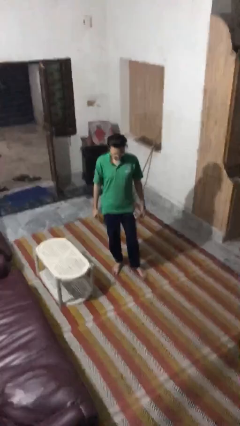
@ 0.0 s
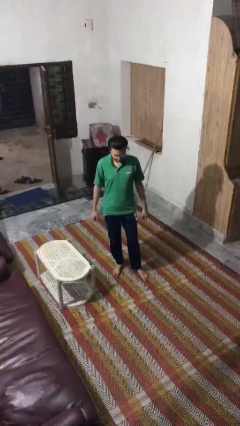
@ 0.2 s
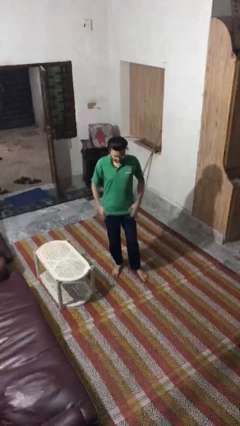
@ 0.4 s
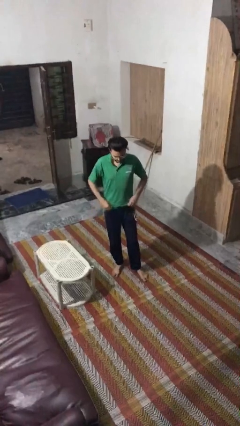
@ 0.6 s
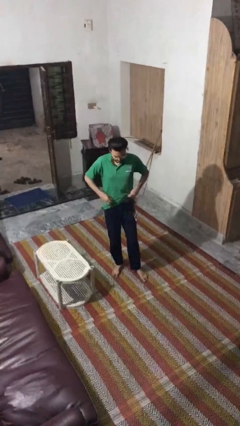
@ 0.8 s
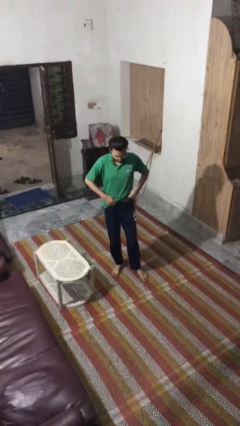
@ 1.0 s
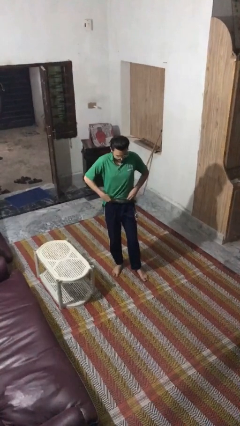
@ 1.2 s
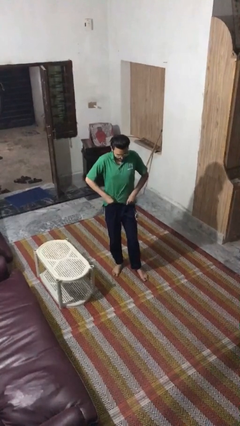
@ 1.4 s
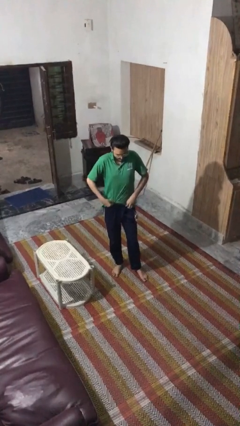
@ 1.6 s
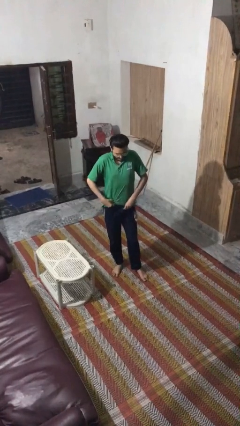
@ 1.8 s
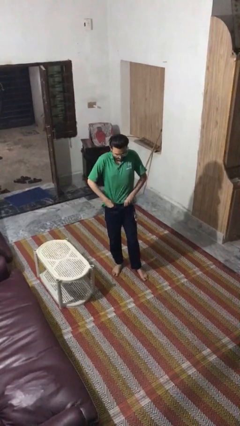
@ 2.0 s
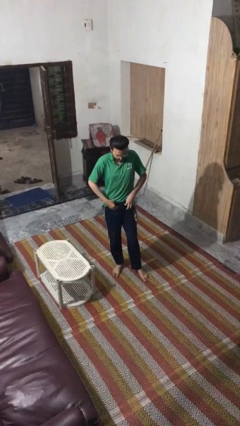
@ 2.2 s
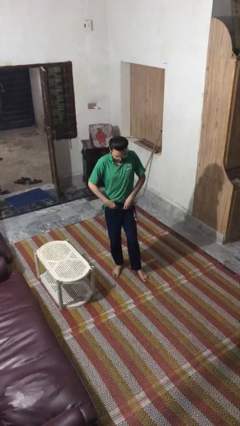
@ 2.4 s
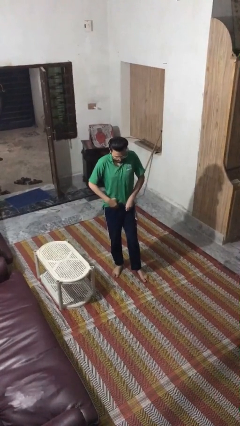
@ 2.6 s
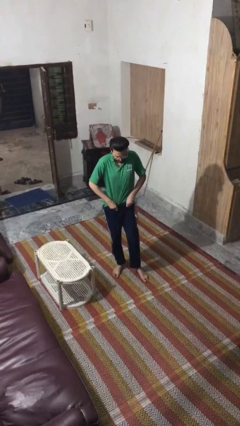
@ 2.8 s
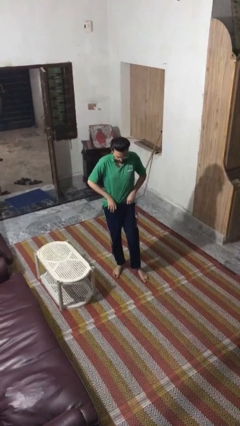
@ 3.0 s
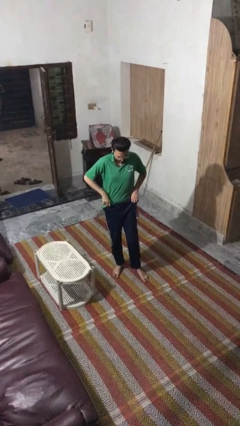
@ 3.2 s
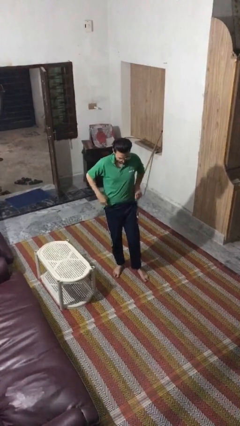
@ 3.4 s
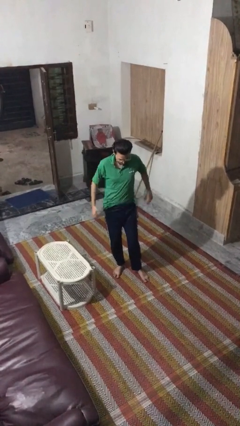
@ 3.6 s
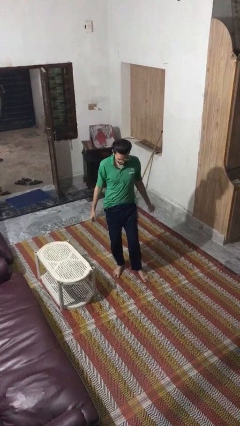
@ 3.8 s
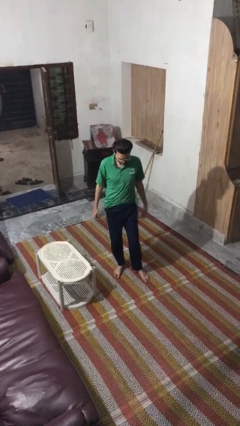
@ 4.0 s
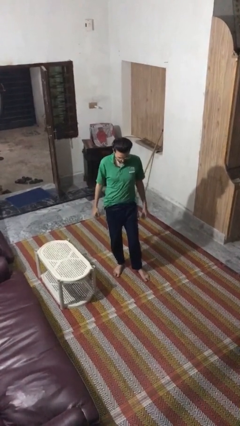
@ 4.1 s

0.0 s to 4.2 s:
person tucks in shirt

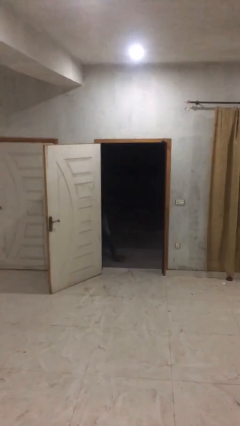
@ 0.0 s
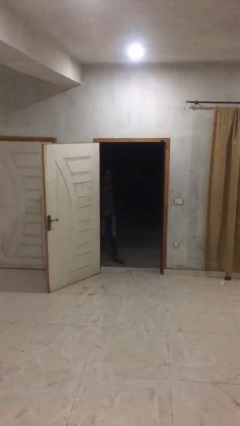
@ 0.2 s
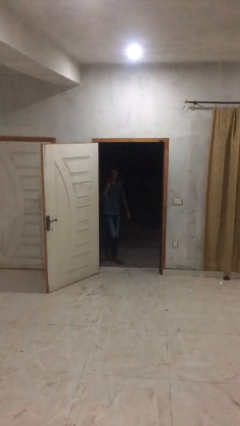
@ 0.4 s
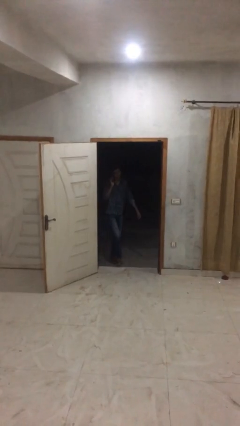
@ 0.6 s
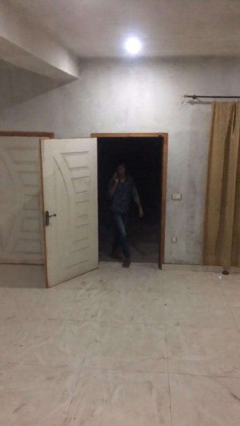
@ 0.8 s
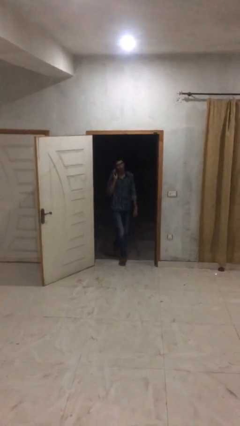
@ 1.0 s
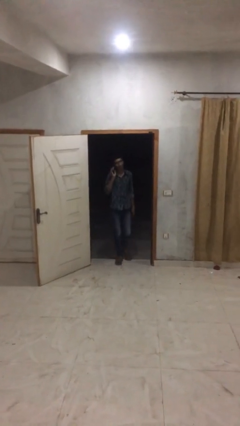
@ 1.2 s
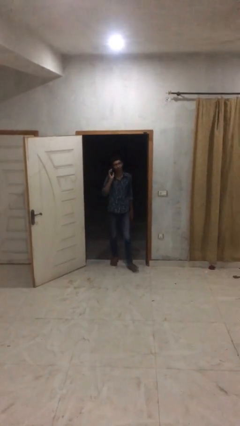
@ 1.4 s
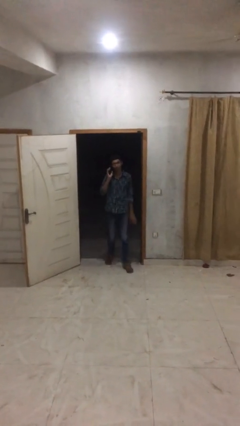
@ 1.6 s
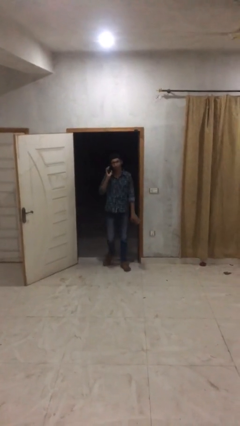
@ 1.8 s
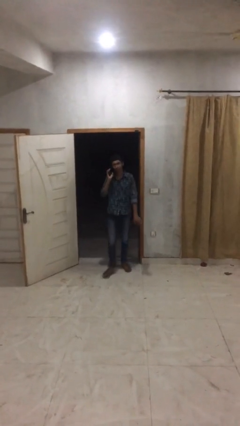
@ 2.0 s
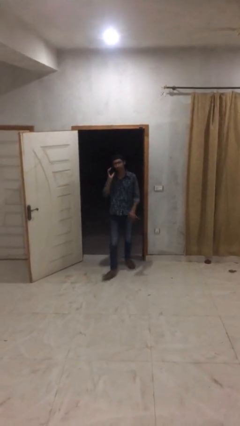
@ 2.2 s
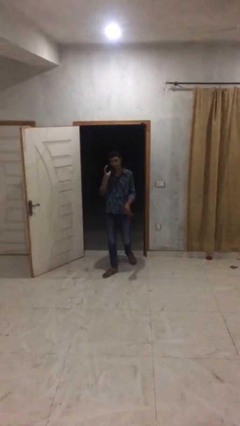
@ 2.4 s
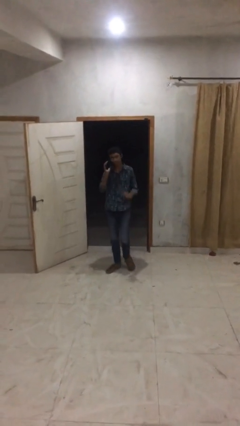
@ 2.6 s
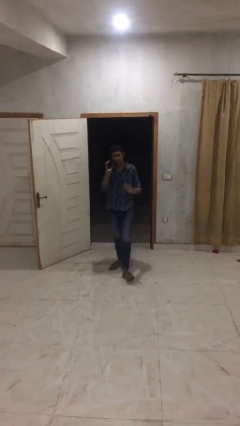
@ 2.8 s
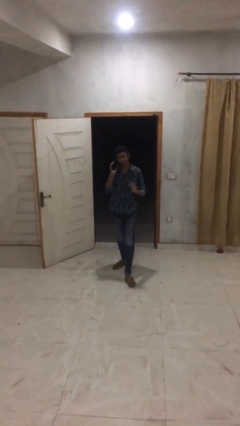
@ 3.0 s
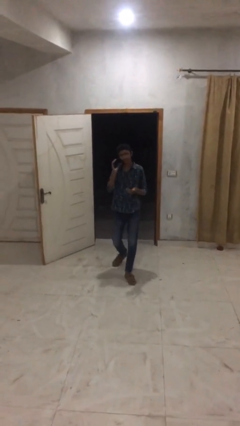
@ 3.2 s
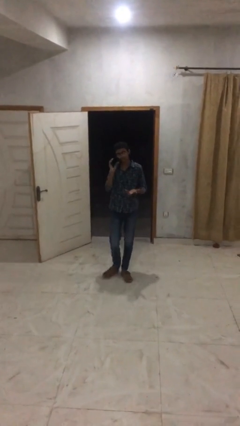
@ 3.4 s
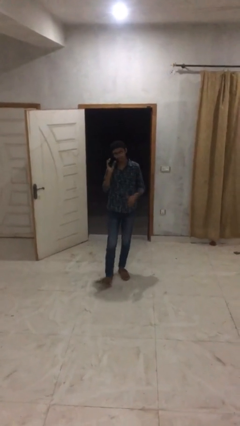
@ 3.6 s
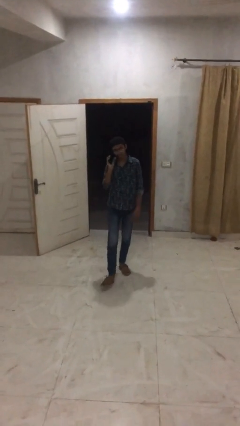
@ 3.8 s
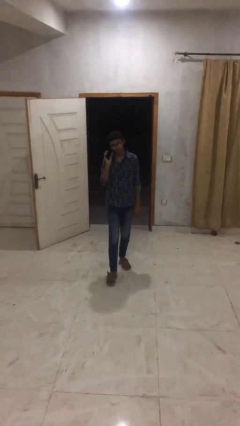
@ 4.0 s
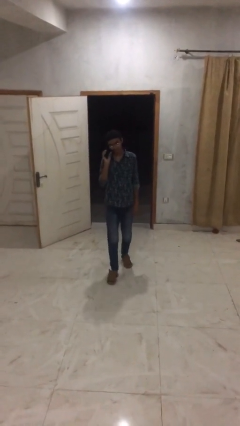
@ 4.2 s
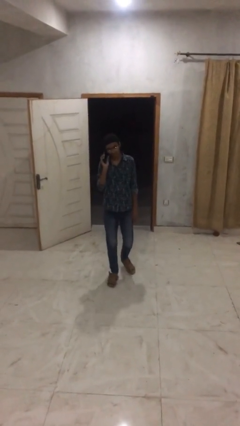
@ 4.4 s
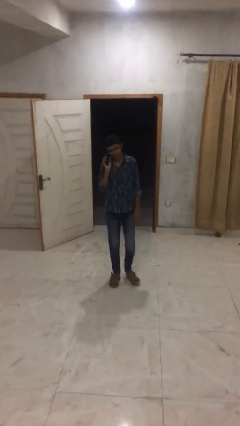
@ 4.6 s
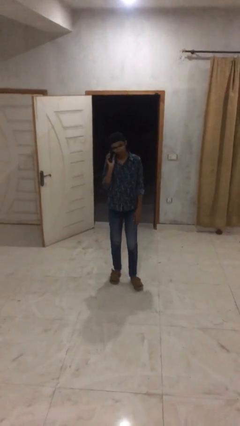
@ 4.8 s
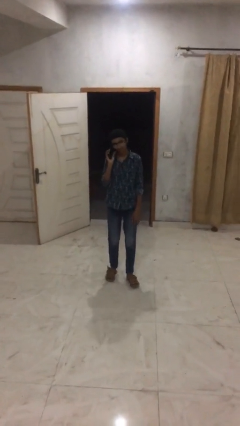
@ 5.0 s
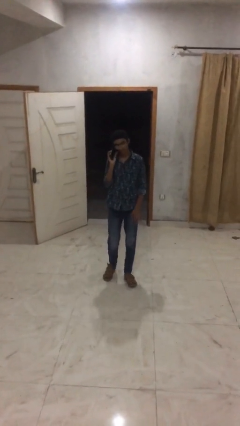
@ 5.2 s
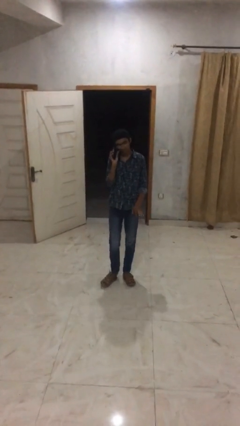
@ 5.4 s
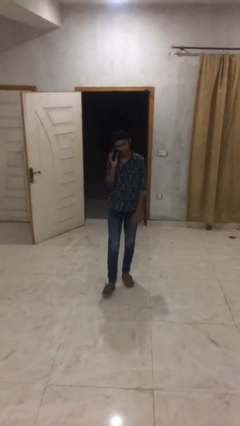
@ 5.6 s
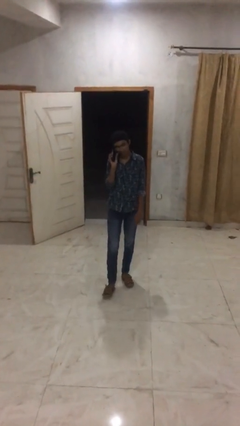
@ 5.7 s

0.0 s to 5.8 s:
person enters scene through structure

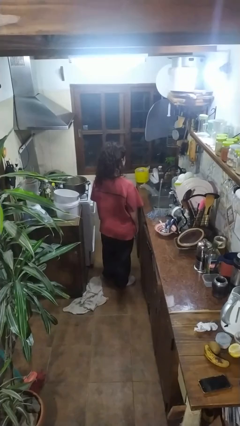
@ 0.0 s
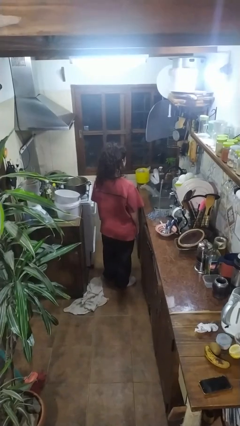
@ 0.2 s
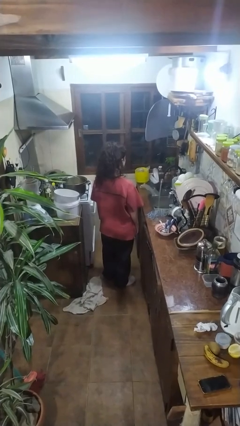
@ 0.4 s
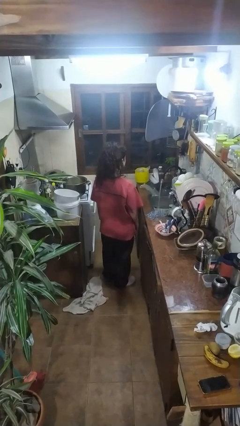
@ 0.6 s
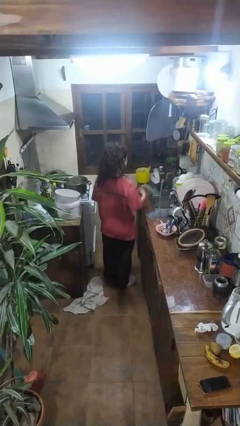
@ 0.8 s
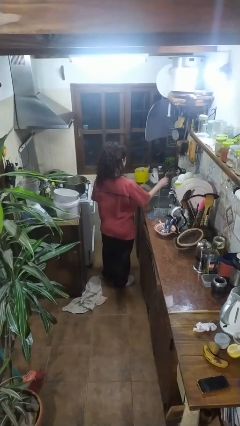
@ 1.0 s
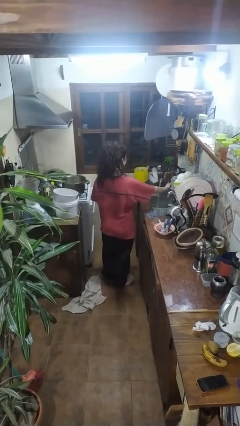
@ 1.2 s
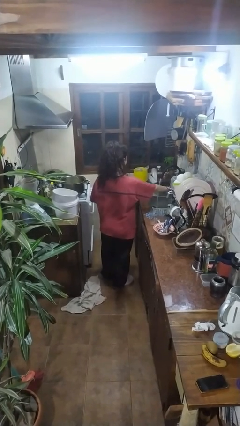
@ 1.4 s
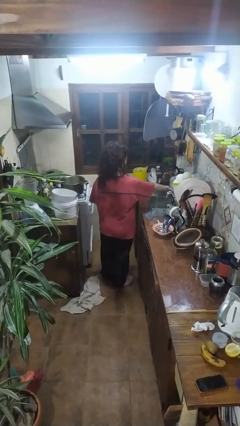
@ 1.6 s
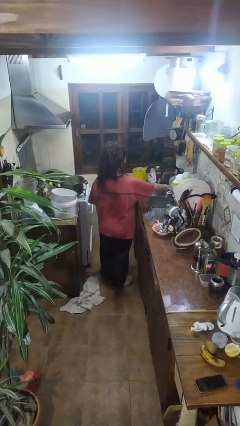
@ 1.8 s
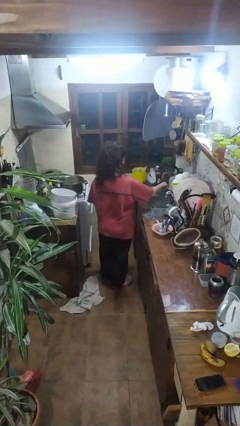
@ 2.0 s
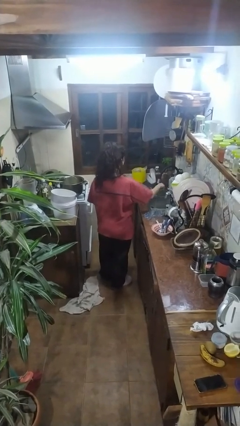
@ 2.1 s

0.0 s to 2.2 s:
person closes clothes washer

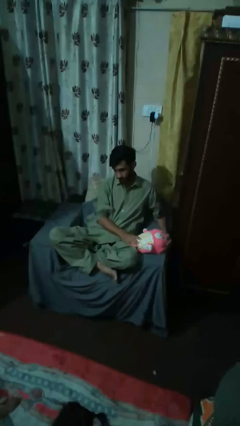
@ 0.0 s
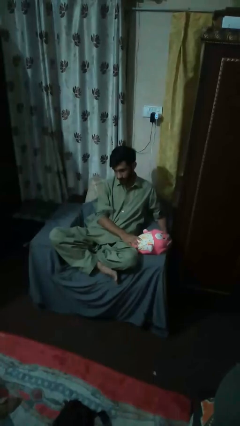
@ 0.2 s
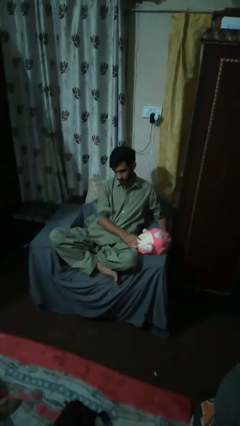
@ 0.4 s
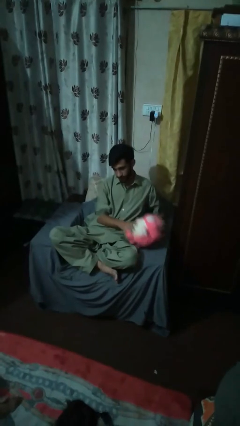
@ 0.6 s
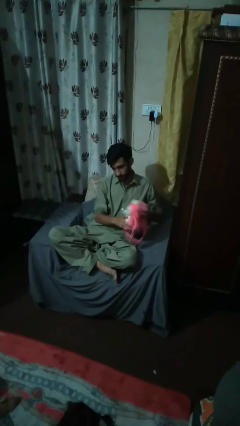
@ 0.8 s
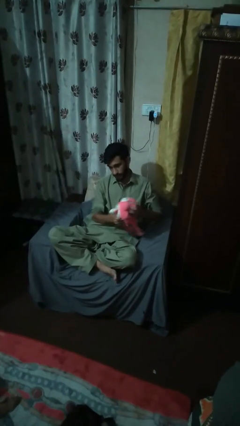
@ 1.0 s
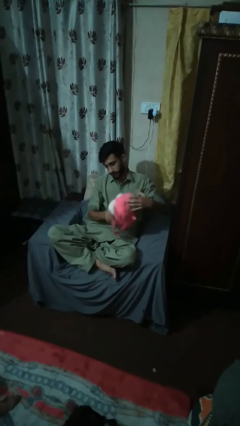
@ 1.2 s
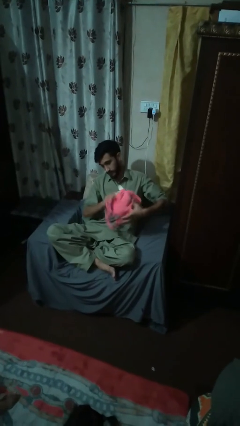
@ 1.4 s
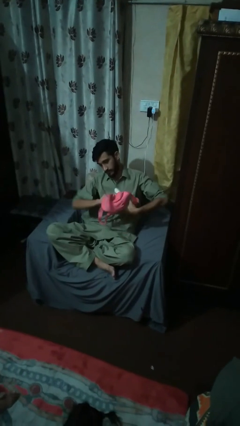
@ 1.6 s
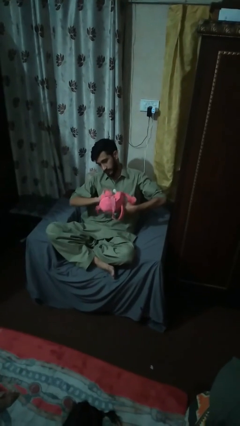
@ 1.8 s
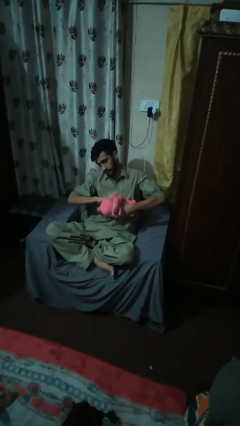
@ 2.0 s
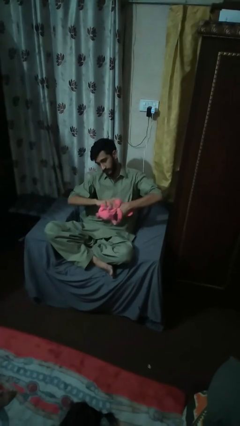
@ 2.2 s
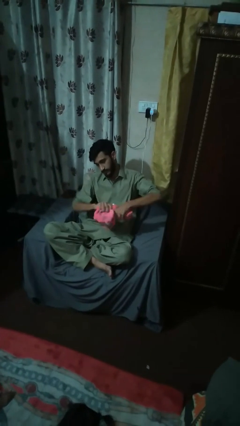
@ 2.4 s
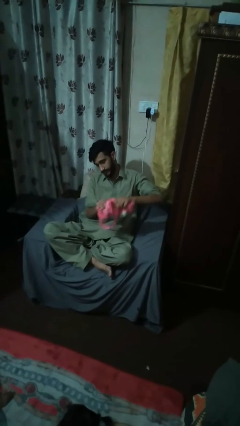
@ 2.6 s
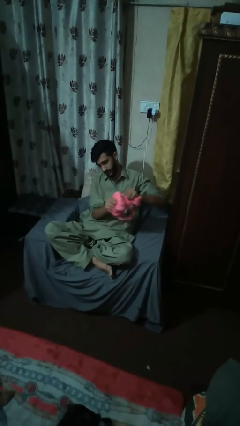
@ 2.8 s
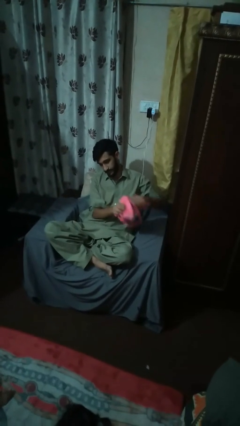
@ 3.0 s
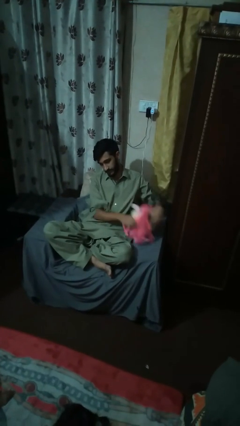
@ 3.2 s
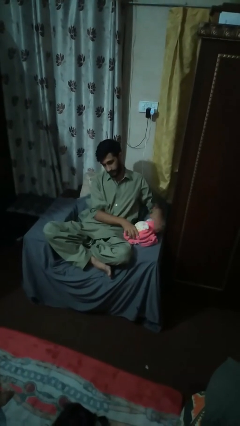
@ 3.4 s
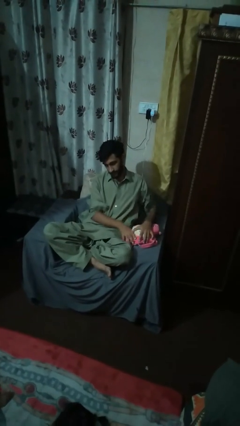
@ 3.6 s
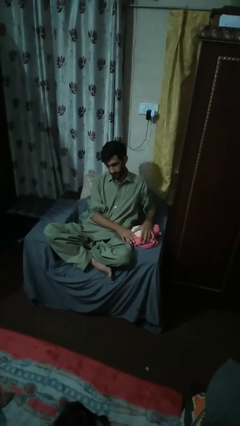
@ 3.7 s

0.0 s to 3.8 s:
person squeezes object

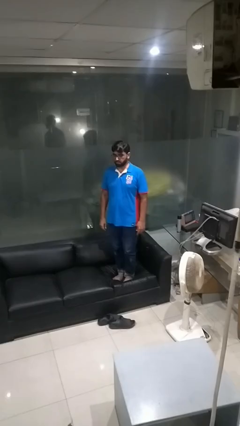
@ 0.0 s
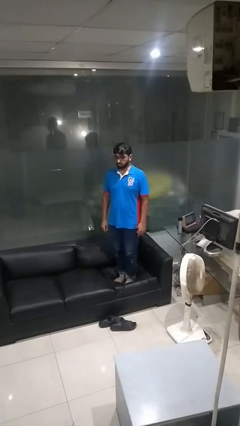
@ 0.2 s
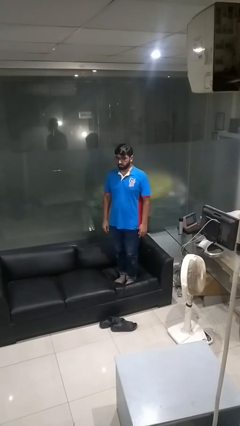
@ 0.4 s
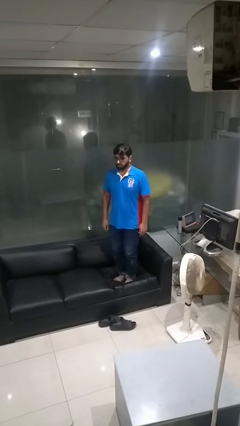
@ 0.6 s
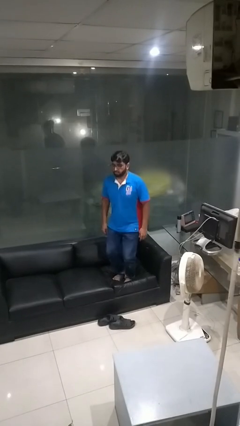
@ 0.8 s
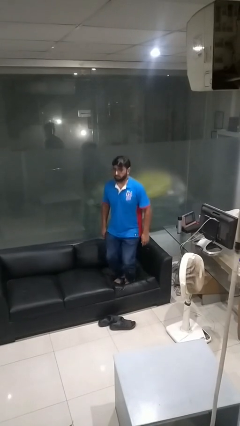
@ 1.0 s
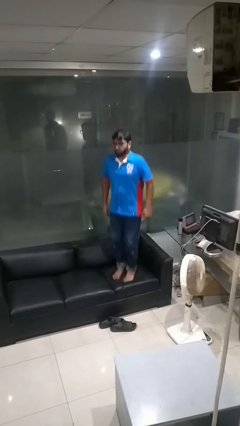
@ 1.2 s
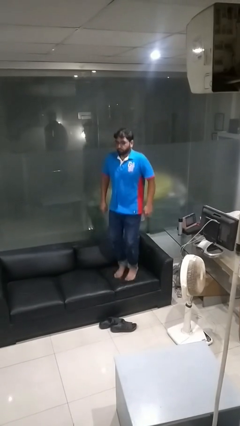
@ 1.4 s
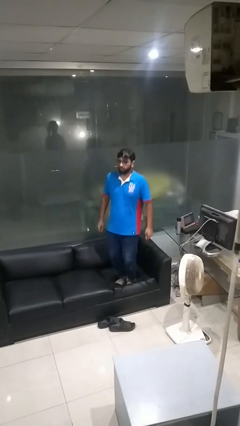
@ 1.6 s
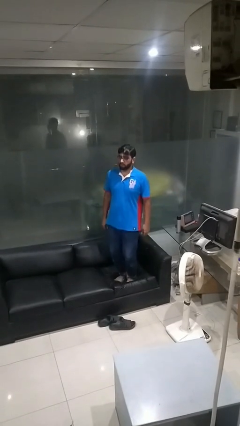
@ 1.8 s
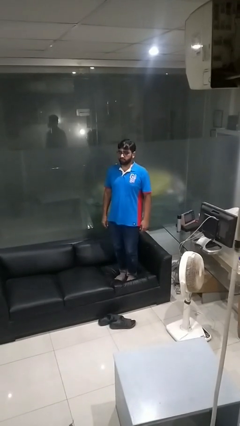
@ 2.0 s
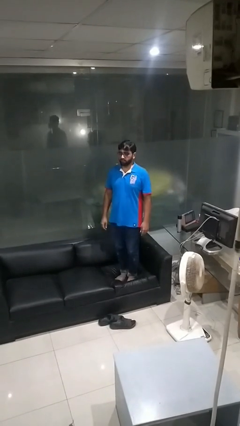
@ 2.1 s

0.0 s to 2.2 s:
person jumps on couch
